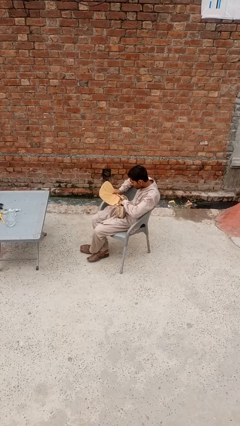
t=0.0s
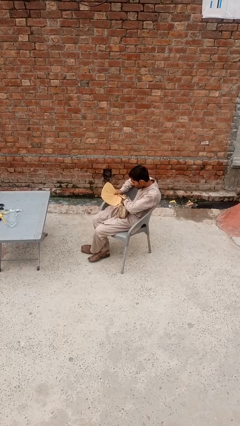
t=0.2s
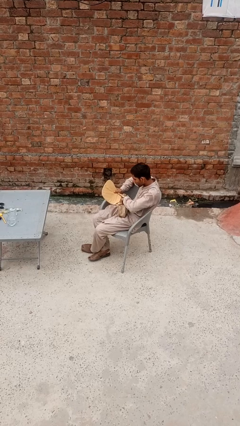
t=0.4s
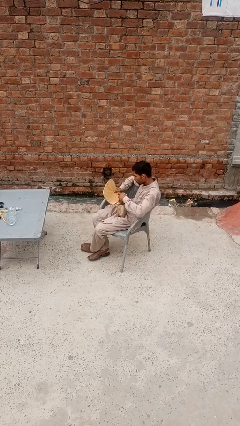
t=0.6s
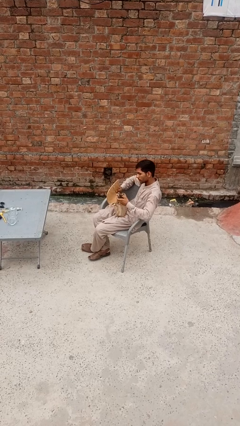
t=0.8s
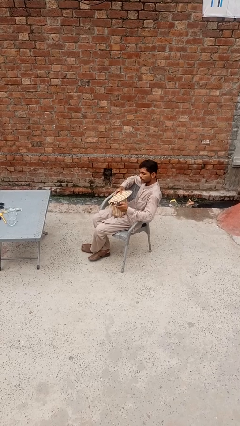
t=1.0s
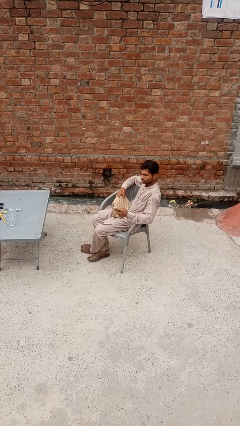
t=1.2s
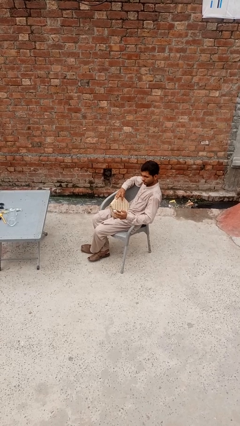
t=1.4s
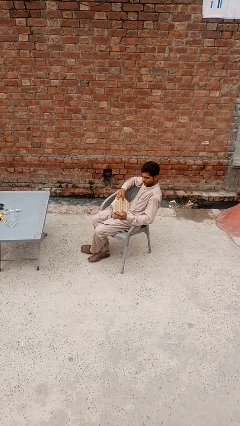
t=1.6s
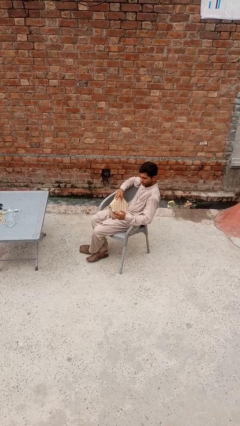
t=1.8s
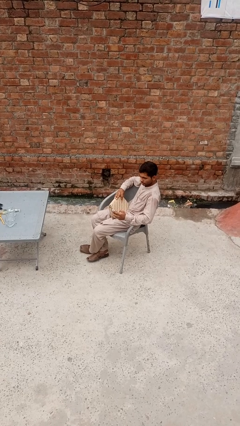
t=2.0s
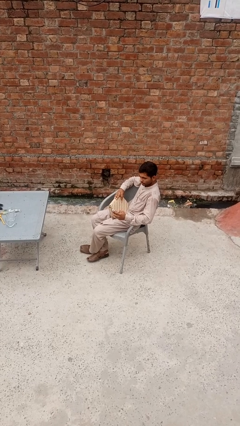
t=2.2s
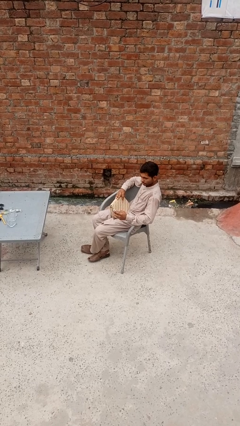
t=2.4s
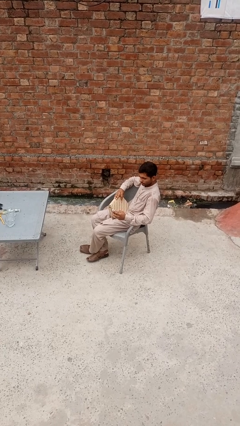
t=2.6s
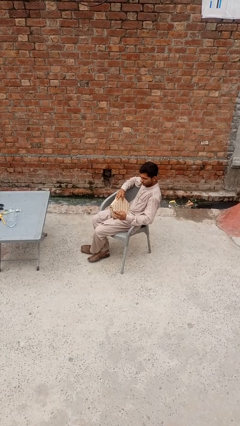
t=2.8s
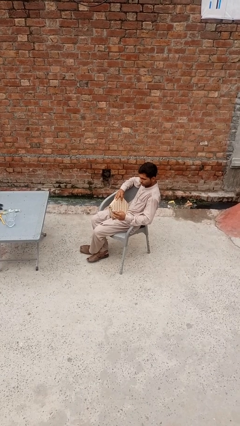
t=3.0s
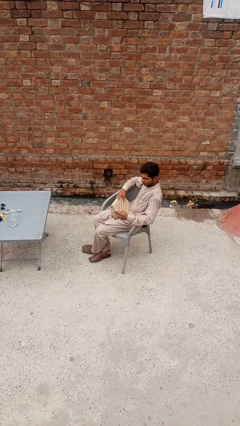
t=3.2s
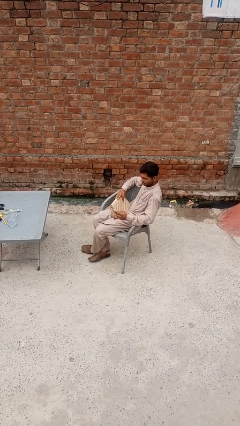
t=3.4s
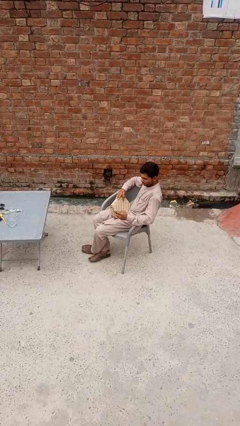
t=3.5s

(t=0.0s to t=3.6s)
person takes object from purse

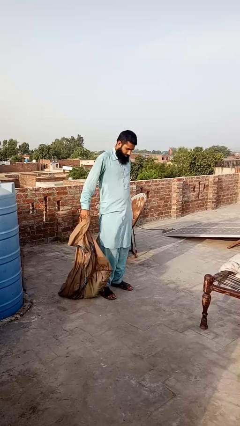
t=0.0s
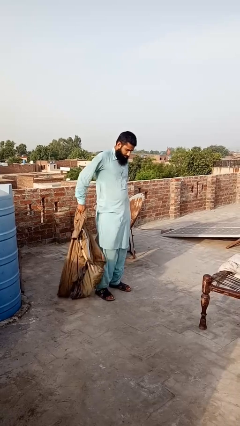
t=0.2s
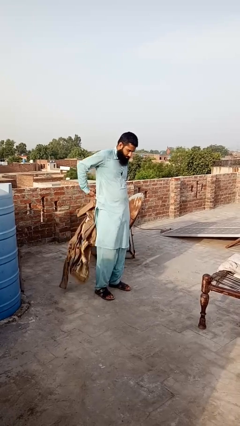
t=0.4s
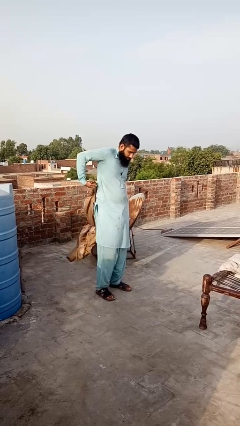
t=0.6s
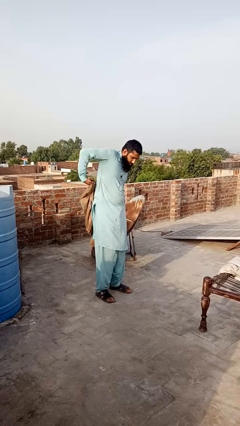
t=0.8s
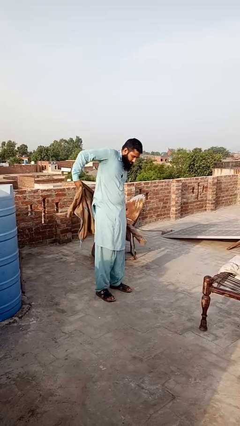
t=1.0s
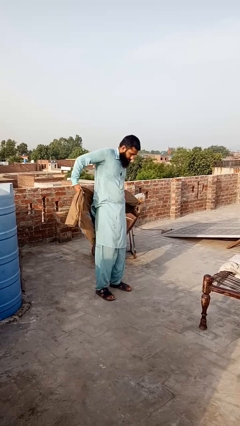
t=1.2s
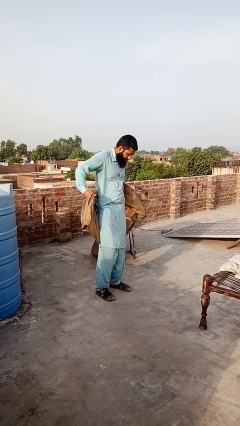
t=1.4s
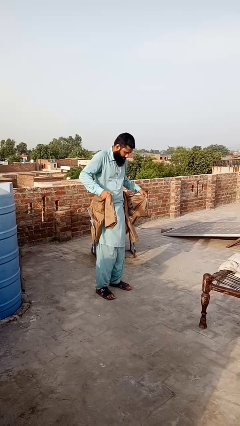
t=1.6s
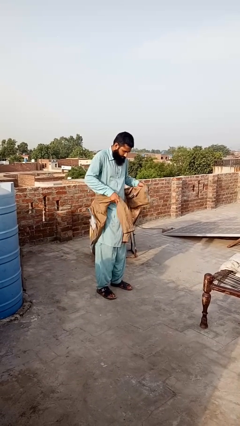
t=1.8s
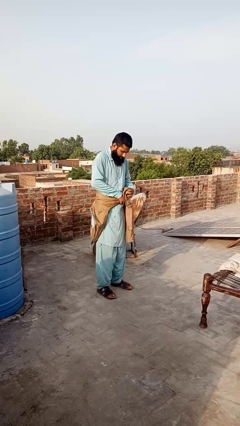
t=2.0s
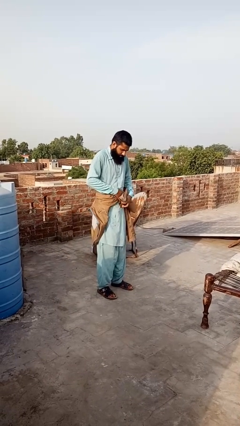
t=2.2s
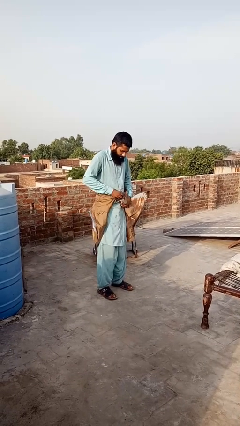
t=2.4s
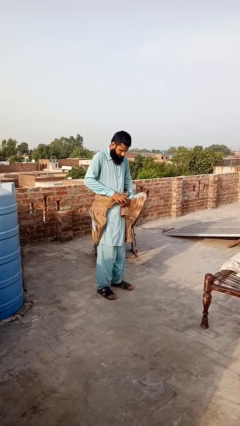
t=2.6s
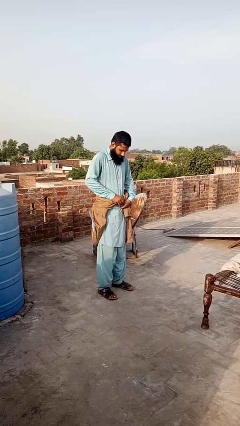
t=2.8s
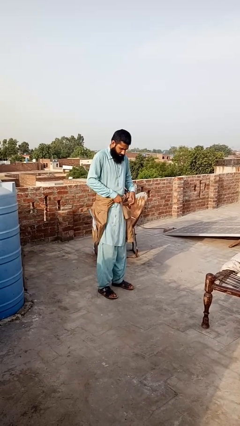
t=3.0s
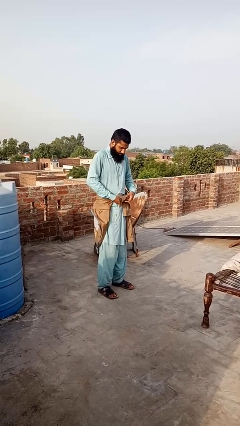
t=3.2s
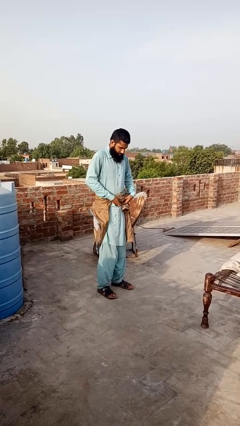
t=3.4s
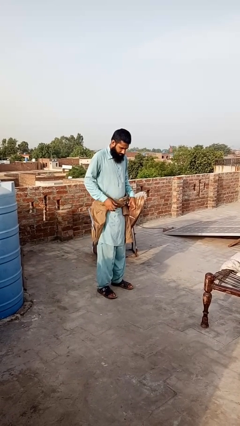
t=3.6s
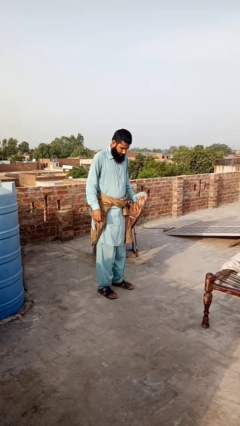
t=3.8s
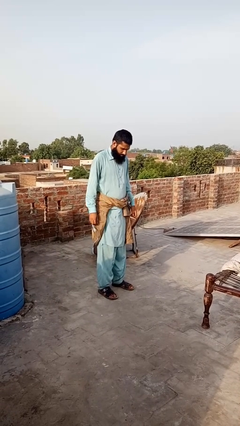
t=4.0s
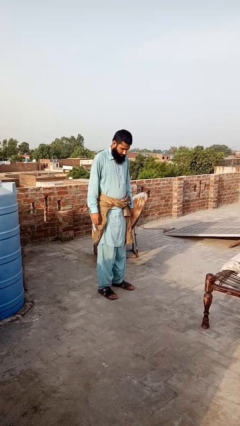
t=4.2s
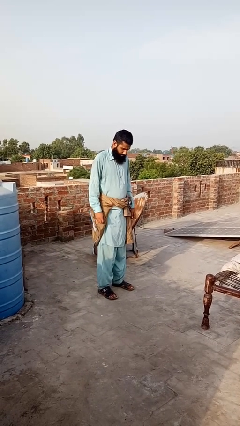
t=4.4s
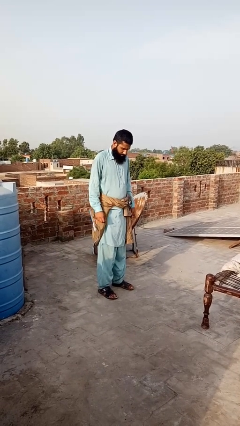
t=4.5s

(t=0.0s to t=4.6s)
person ties jacket around waist

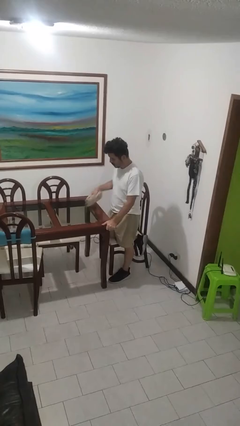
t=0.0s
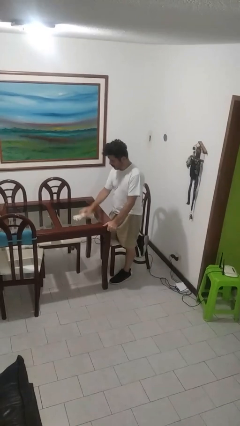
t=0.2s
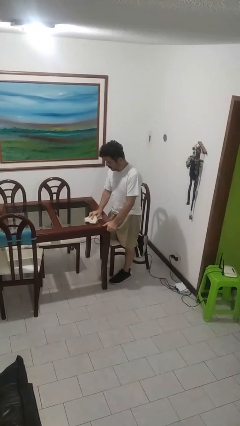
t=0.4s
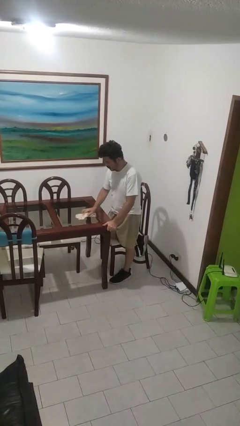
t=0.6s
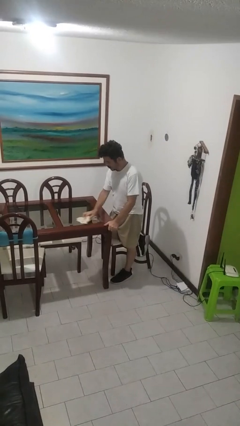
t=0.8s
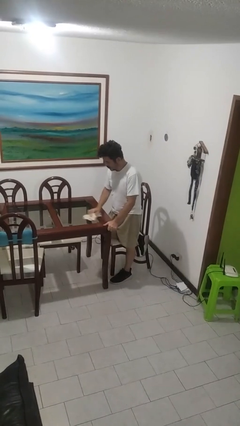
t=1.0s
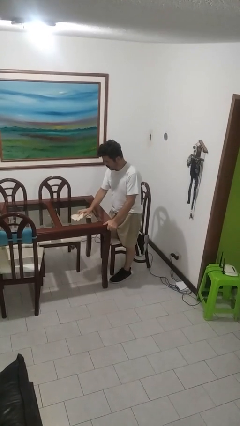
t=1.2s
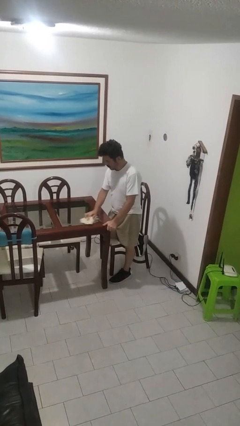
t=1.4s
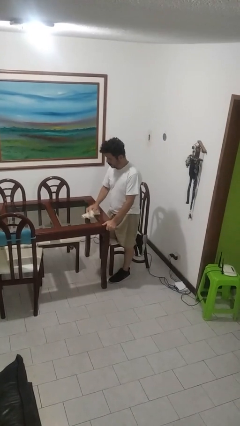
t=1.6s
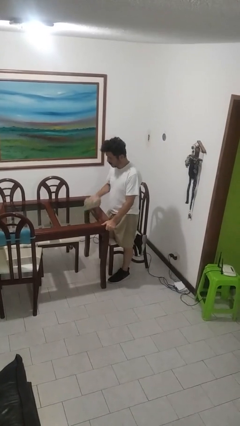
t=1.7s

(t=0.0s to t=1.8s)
person cleans table with rag

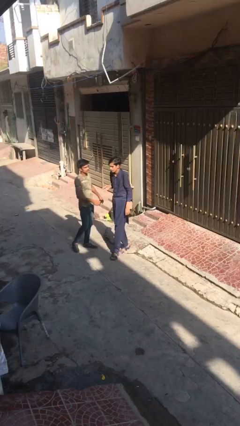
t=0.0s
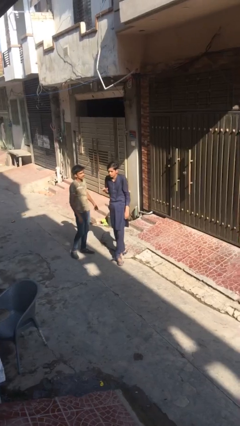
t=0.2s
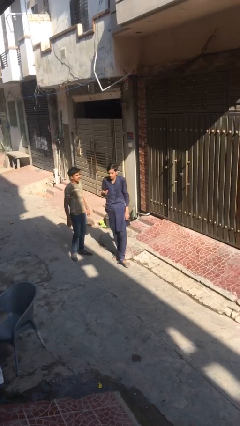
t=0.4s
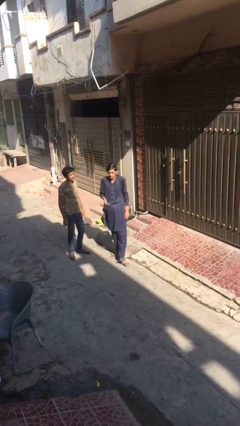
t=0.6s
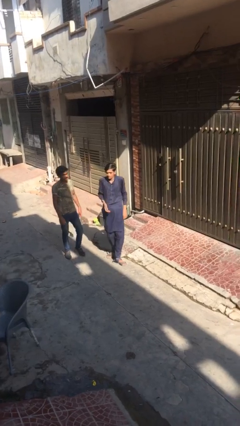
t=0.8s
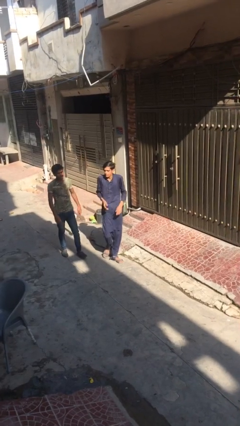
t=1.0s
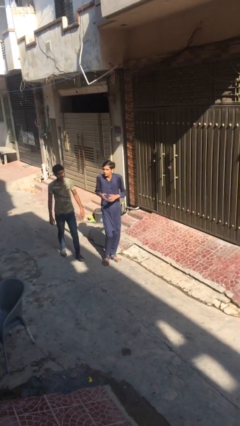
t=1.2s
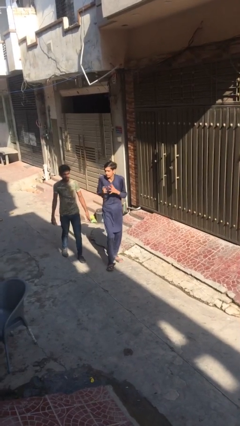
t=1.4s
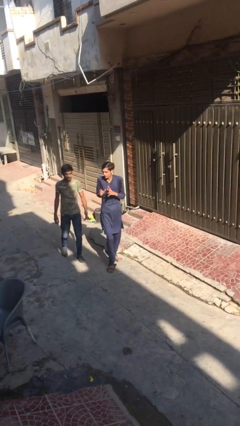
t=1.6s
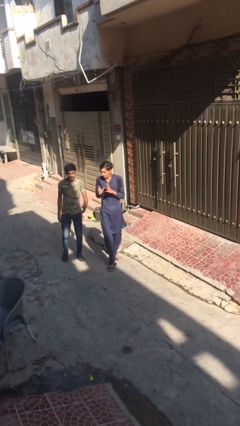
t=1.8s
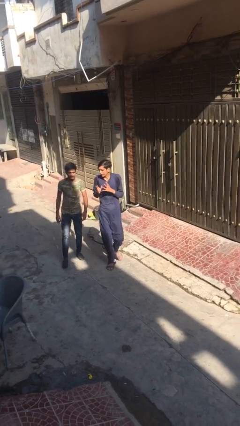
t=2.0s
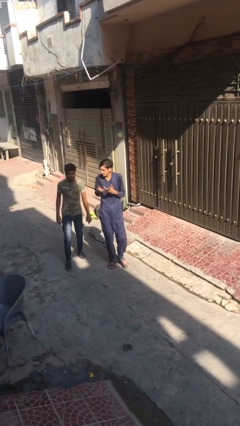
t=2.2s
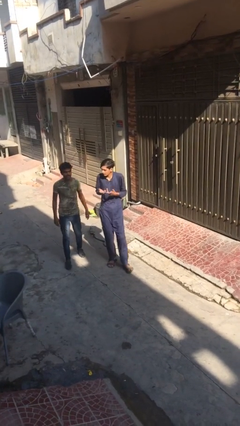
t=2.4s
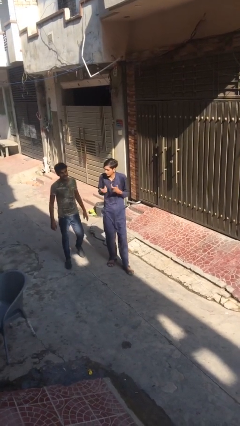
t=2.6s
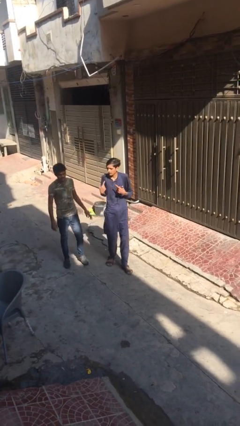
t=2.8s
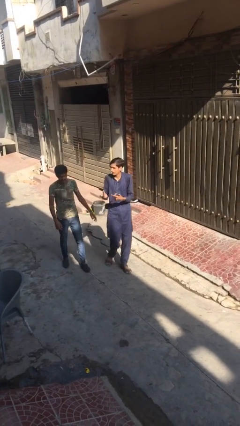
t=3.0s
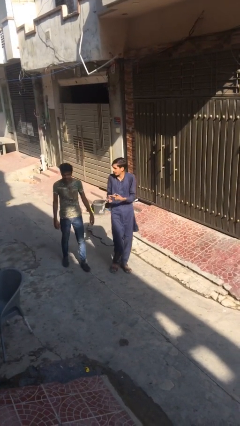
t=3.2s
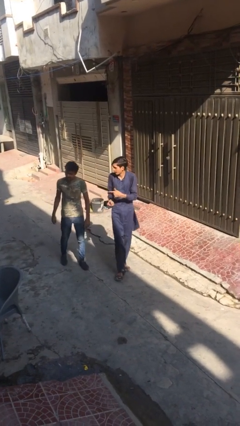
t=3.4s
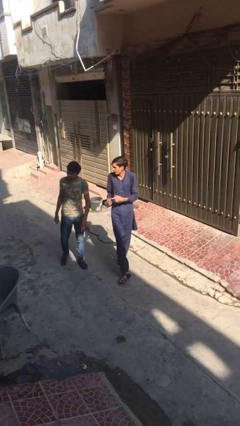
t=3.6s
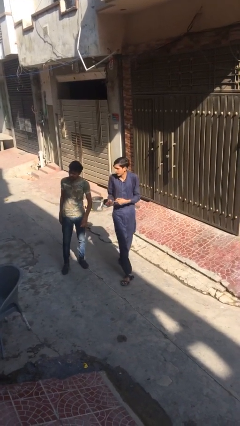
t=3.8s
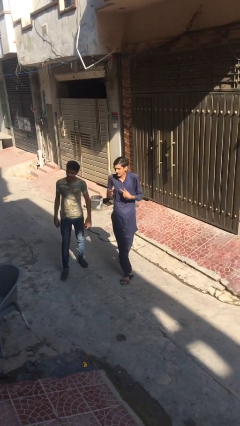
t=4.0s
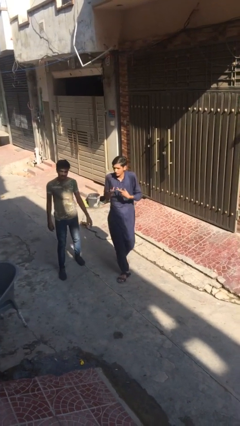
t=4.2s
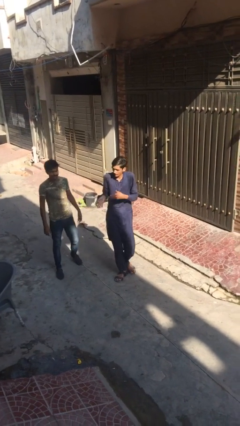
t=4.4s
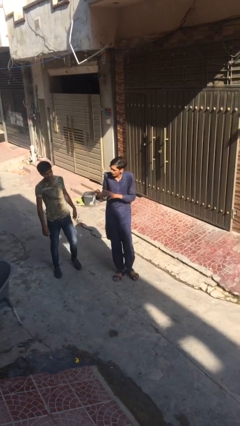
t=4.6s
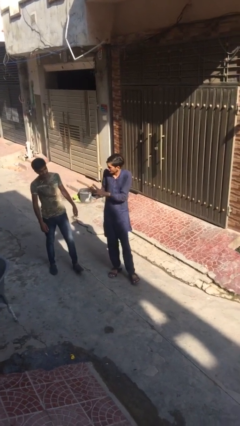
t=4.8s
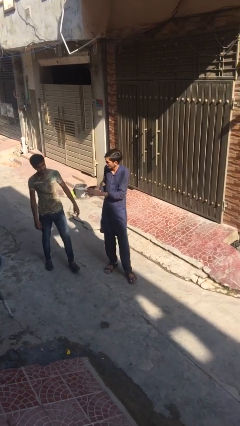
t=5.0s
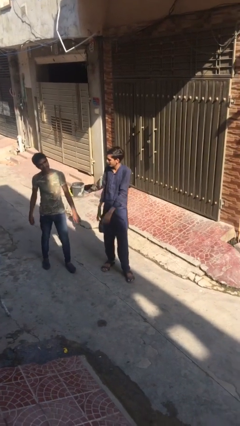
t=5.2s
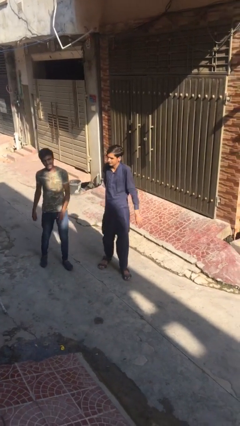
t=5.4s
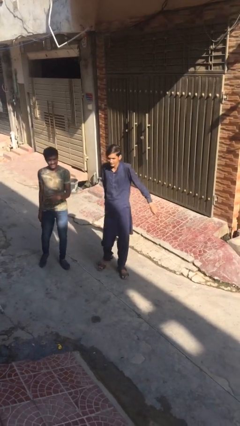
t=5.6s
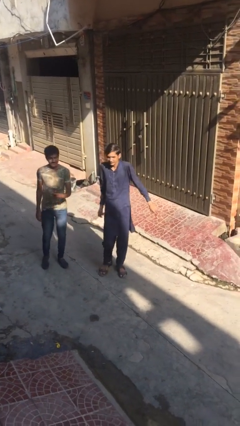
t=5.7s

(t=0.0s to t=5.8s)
person talks to person

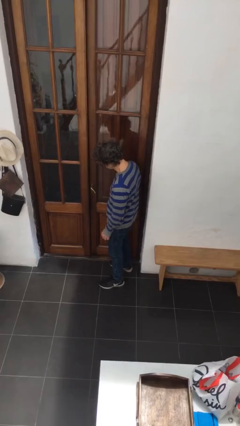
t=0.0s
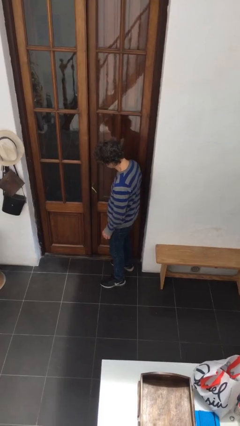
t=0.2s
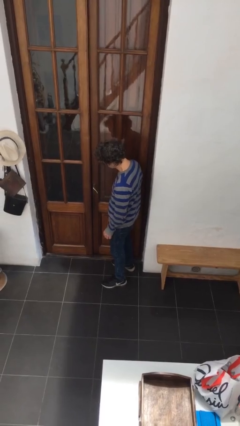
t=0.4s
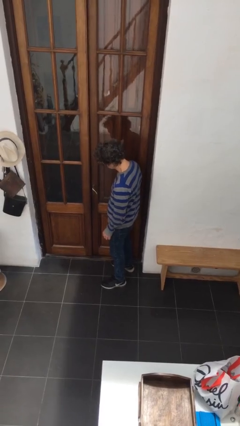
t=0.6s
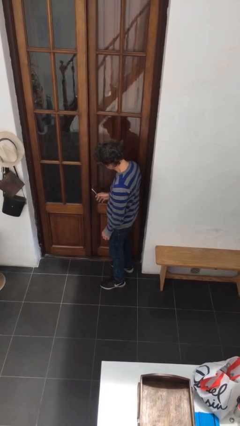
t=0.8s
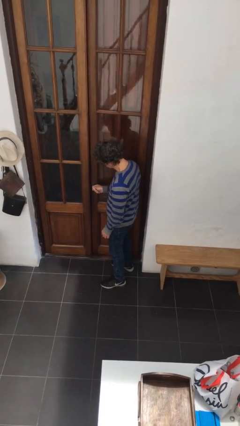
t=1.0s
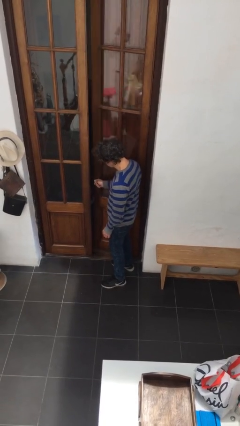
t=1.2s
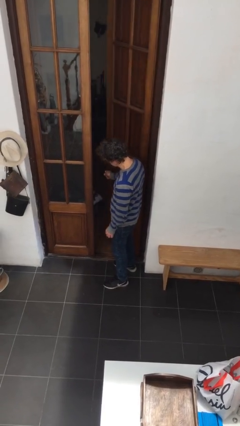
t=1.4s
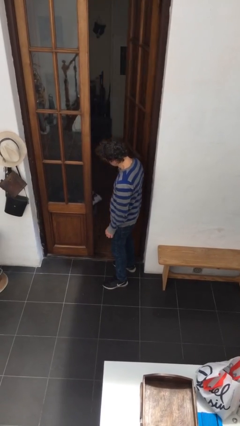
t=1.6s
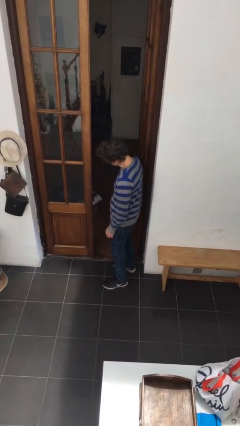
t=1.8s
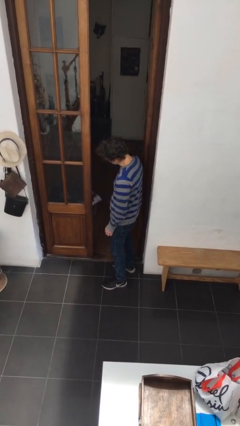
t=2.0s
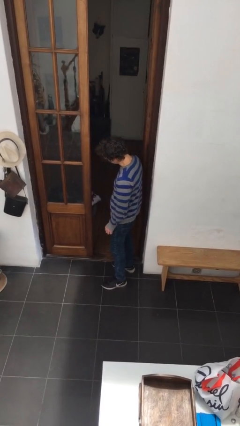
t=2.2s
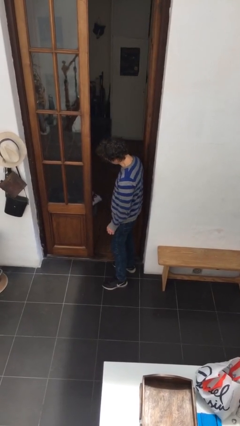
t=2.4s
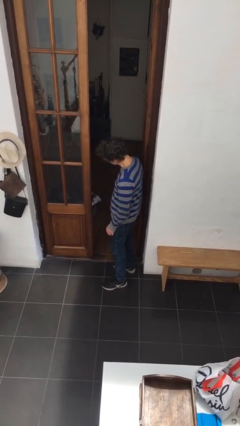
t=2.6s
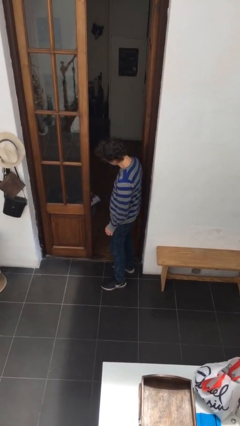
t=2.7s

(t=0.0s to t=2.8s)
person opens facility door
